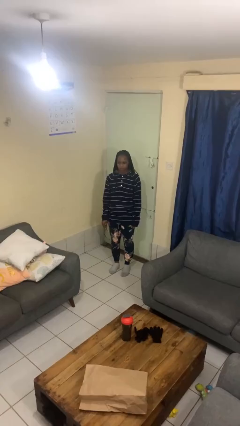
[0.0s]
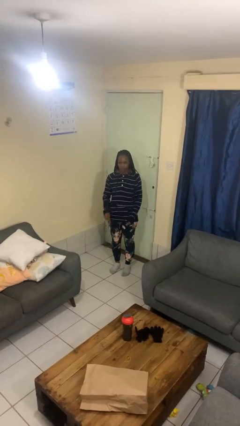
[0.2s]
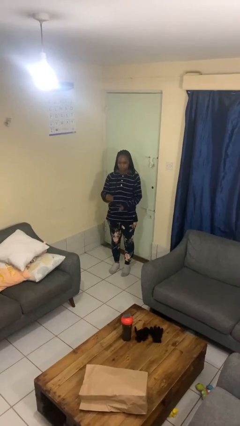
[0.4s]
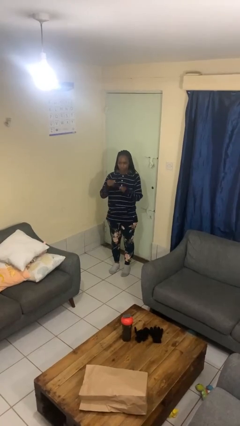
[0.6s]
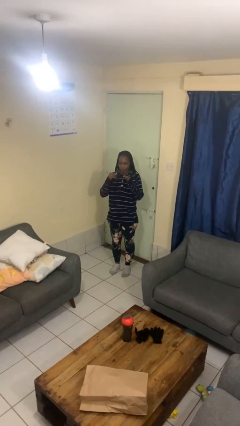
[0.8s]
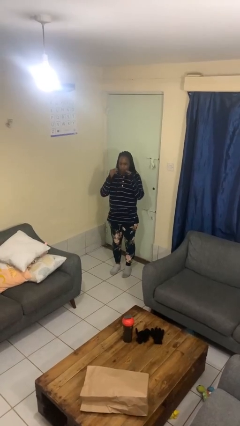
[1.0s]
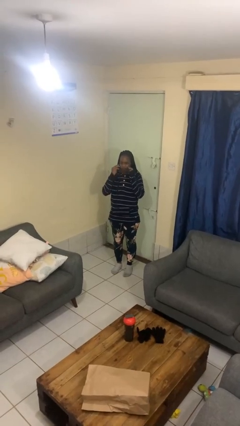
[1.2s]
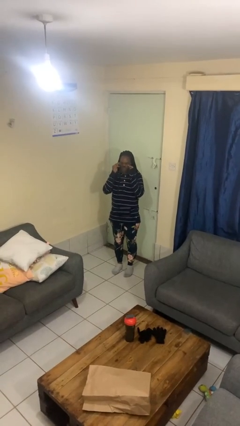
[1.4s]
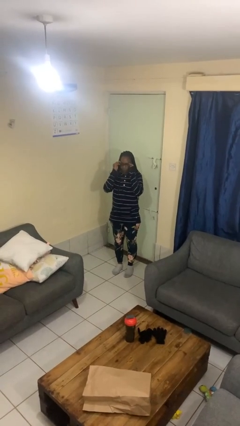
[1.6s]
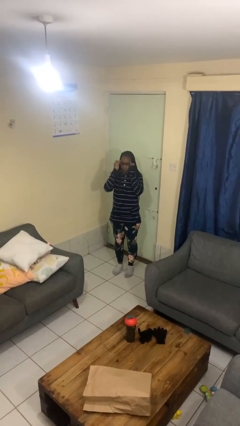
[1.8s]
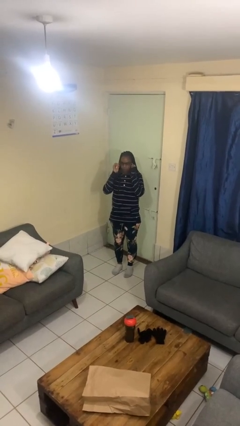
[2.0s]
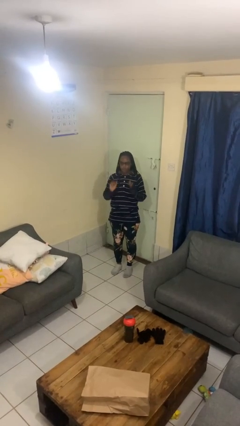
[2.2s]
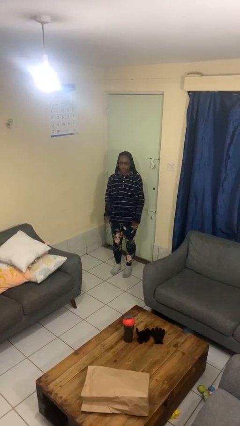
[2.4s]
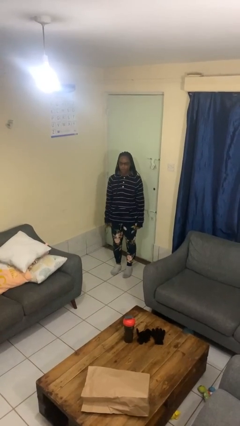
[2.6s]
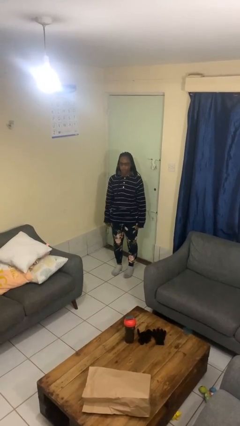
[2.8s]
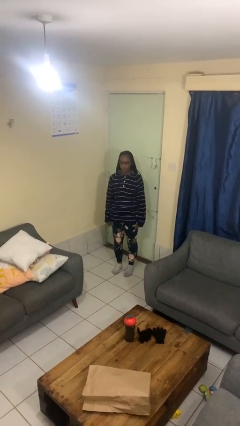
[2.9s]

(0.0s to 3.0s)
person puts on glasses

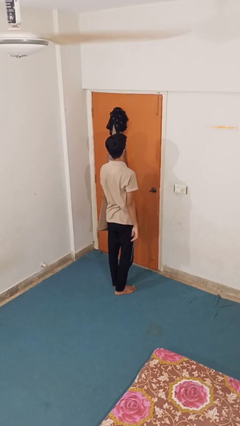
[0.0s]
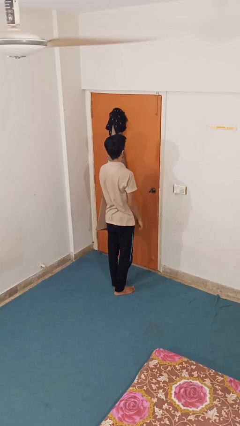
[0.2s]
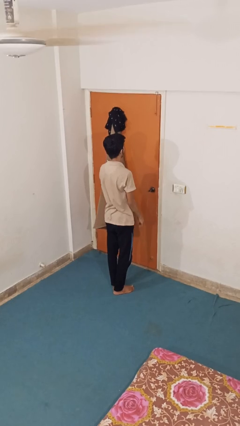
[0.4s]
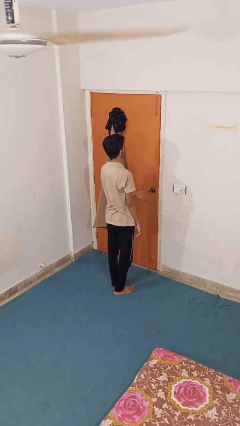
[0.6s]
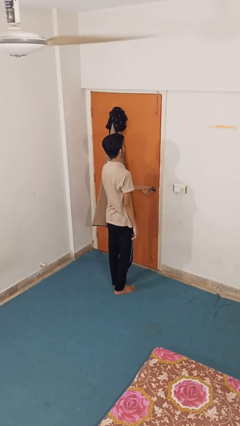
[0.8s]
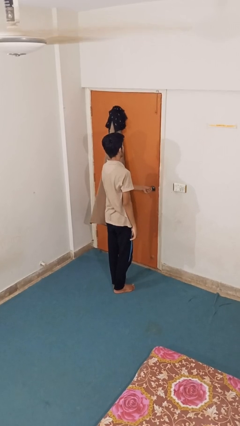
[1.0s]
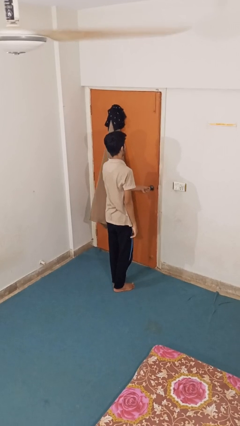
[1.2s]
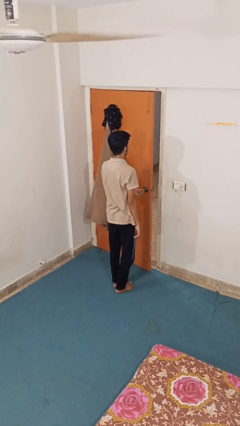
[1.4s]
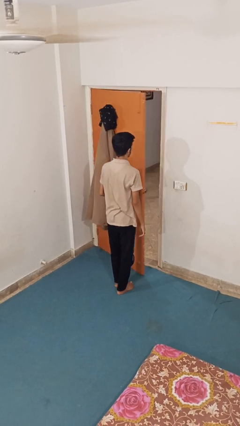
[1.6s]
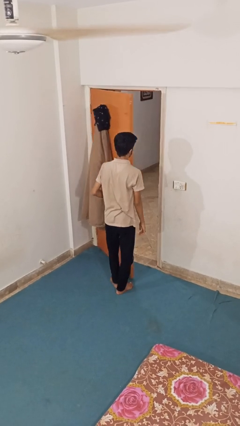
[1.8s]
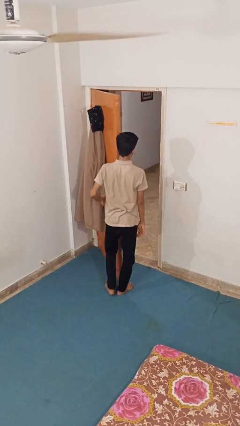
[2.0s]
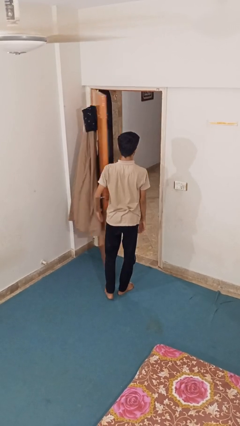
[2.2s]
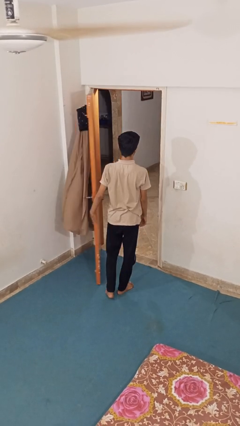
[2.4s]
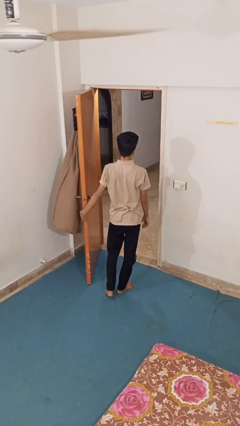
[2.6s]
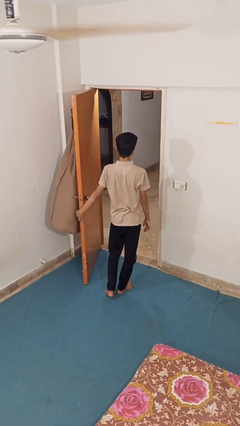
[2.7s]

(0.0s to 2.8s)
person opens facility door

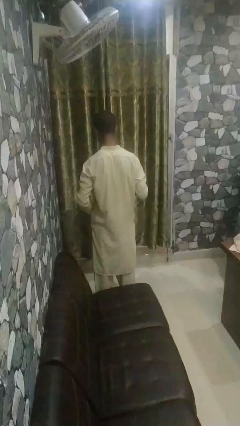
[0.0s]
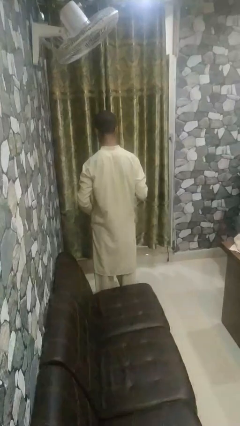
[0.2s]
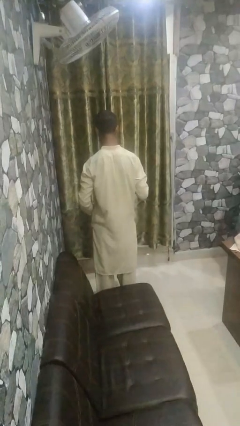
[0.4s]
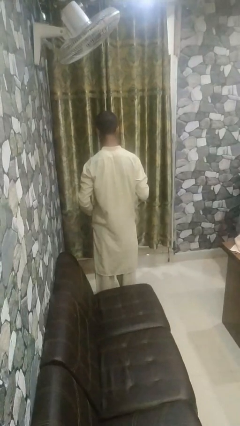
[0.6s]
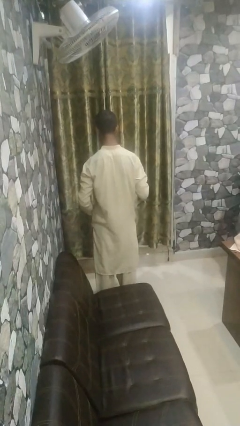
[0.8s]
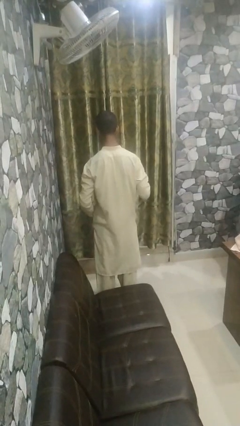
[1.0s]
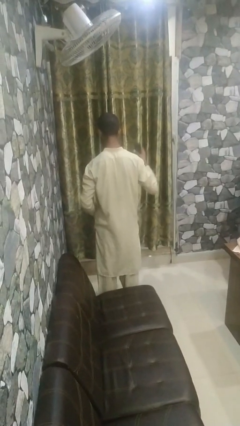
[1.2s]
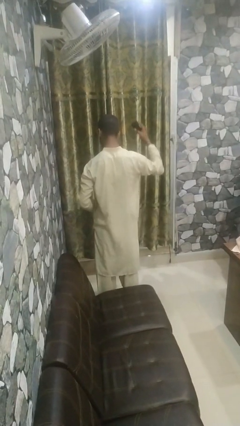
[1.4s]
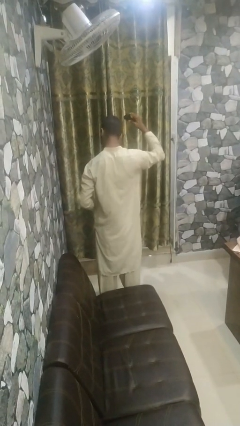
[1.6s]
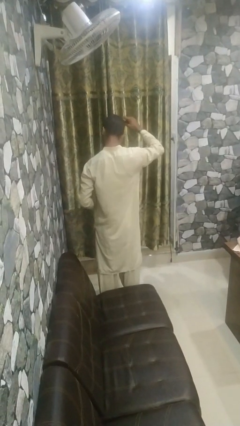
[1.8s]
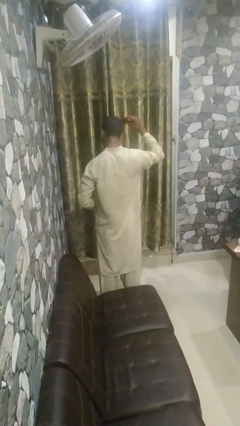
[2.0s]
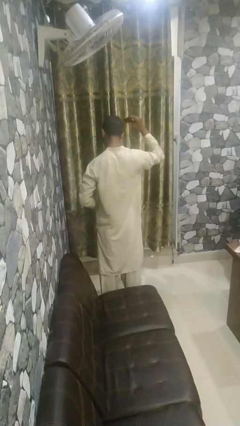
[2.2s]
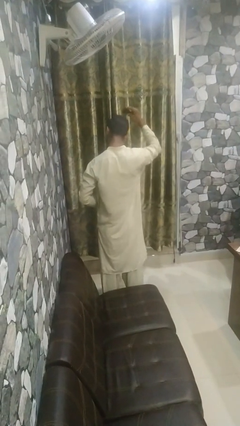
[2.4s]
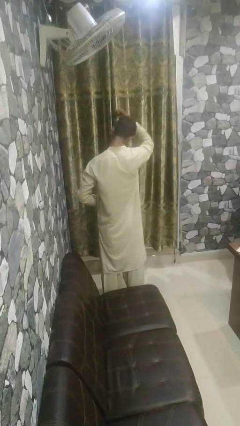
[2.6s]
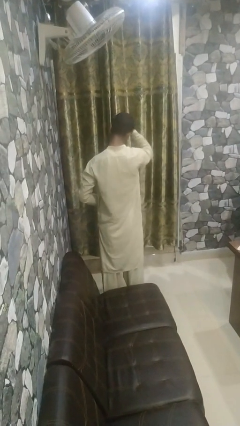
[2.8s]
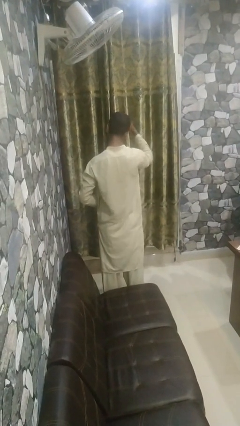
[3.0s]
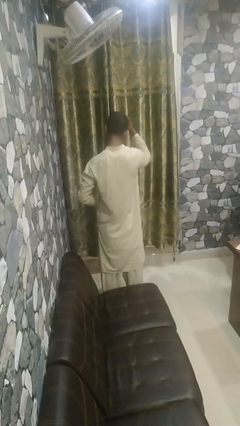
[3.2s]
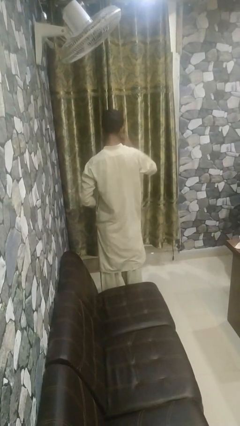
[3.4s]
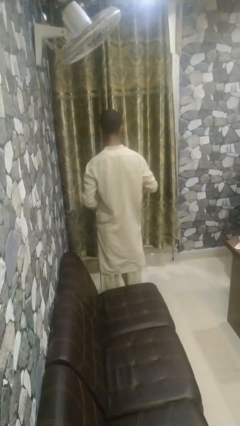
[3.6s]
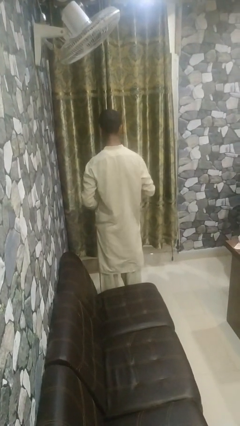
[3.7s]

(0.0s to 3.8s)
person dries hair with hairdryer

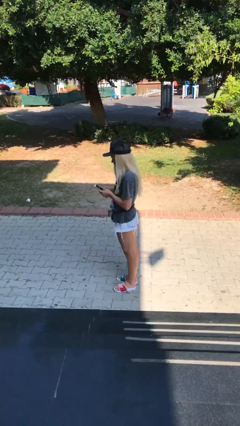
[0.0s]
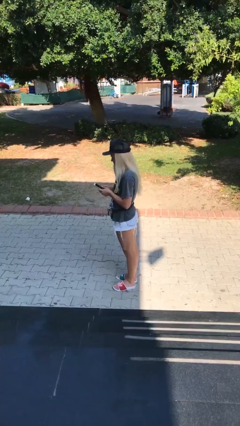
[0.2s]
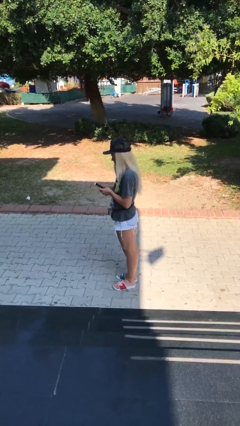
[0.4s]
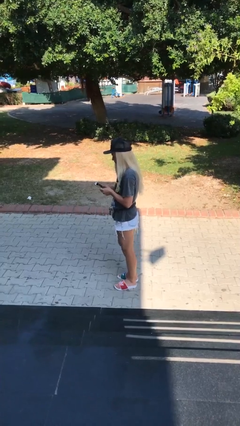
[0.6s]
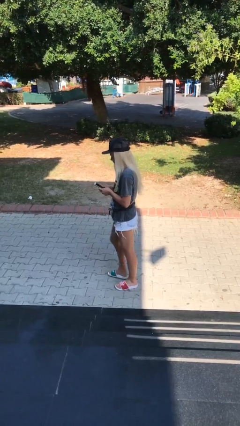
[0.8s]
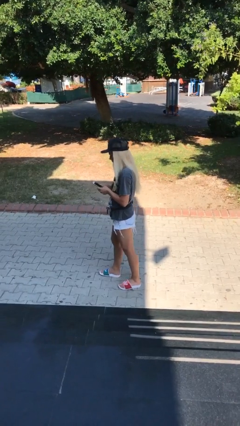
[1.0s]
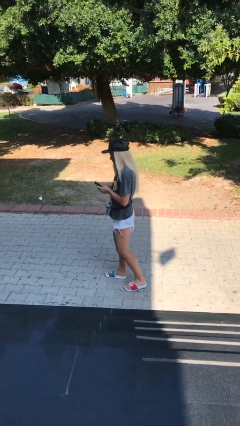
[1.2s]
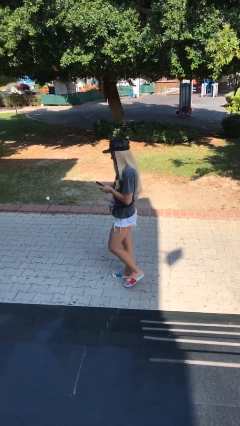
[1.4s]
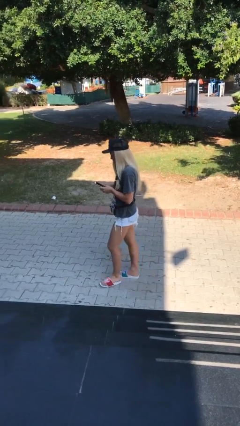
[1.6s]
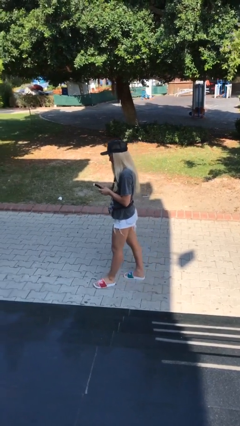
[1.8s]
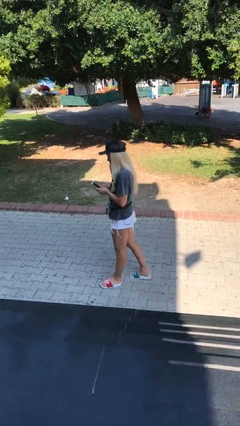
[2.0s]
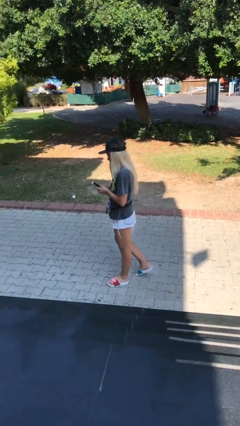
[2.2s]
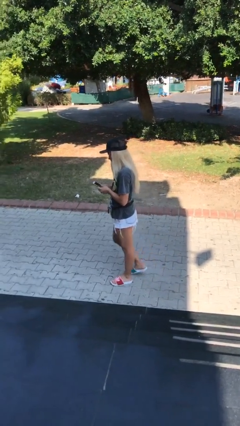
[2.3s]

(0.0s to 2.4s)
person texts on phone

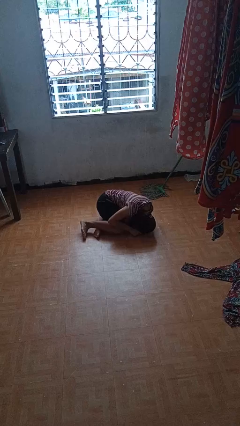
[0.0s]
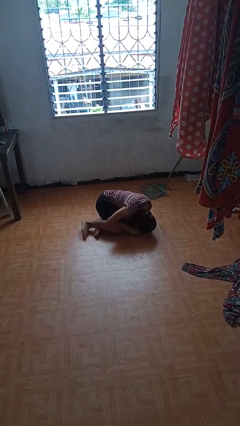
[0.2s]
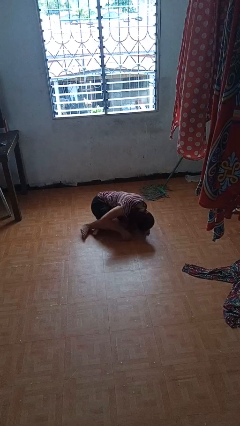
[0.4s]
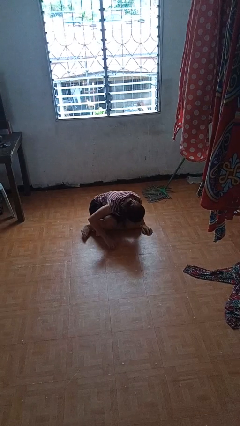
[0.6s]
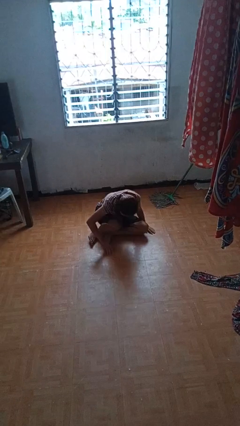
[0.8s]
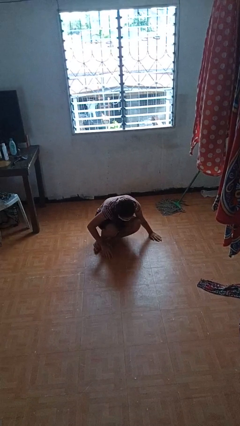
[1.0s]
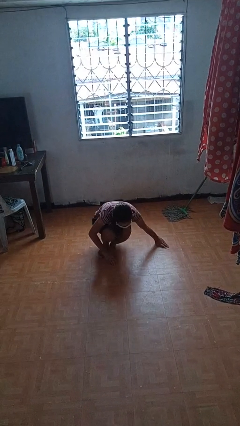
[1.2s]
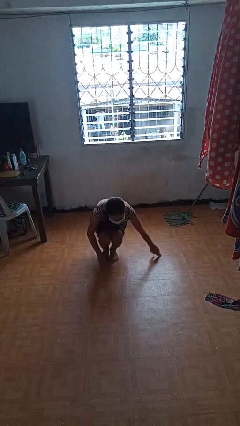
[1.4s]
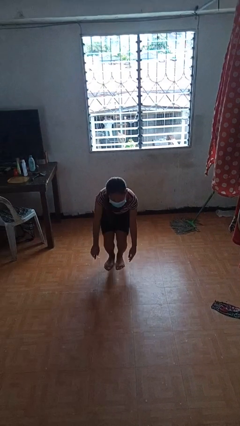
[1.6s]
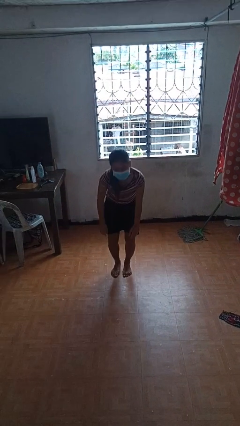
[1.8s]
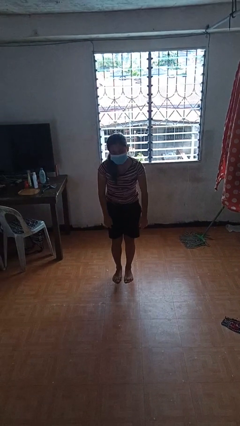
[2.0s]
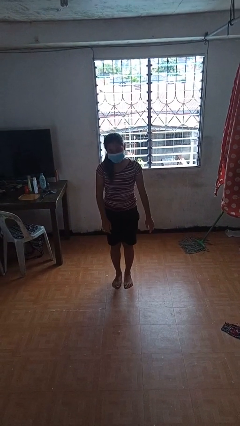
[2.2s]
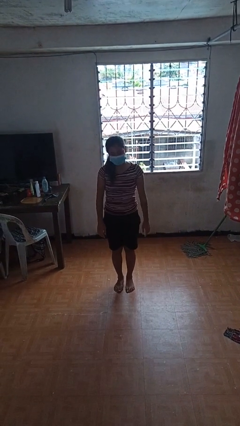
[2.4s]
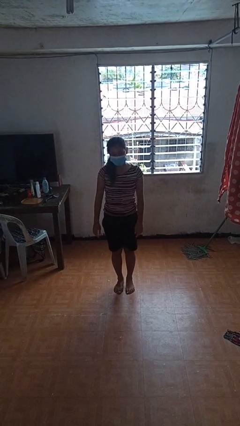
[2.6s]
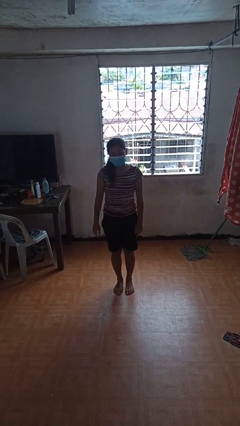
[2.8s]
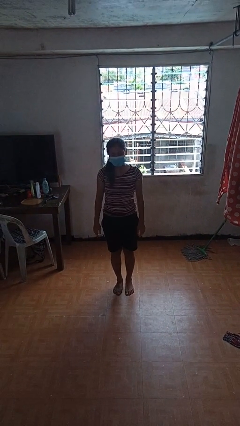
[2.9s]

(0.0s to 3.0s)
person stands up from floor

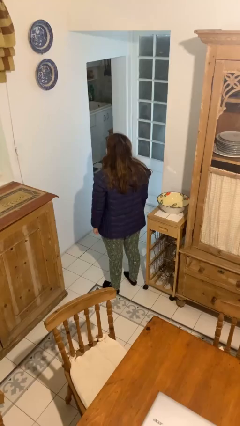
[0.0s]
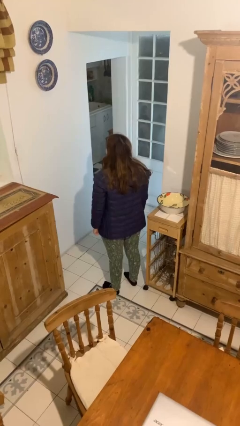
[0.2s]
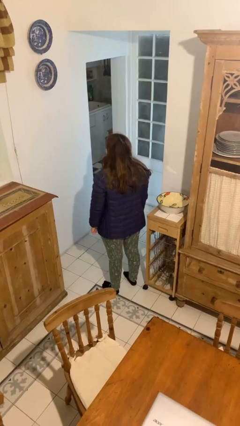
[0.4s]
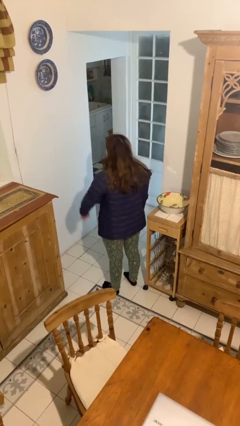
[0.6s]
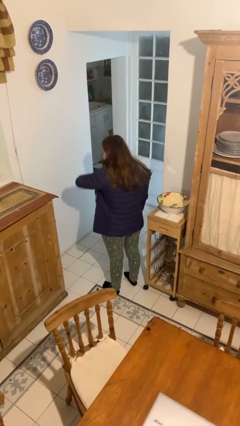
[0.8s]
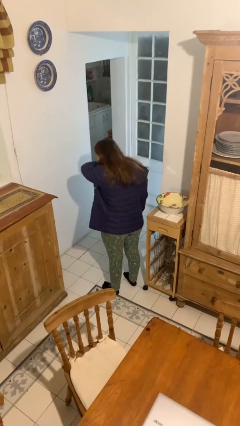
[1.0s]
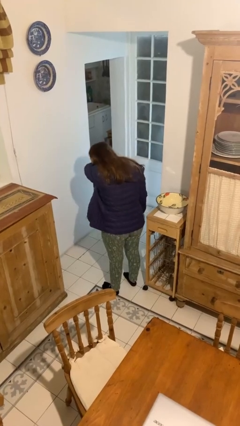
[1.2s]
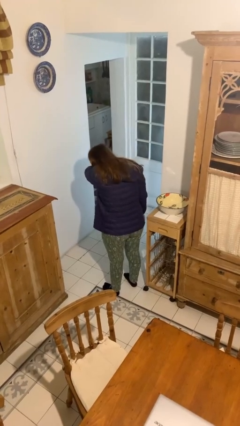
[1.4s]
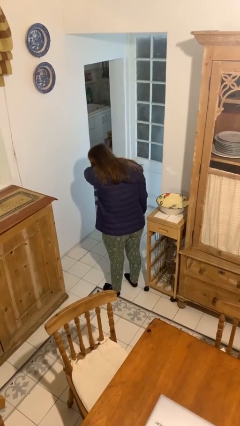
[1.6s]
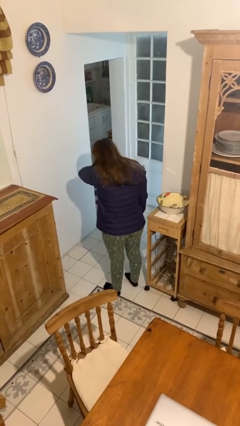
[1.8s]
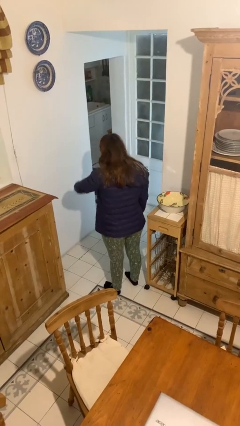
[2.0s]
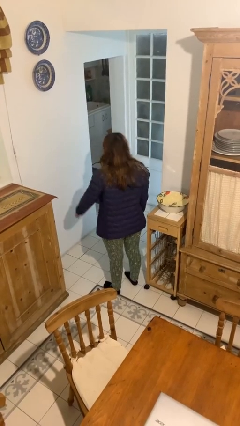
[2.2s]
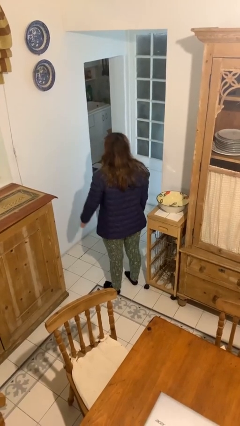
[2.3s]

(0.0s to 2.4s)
person sneezes into arm

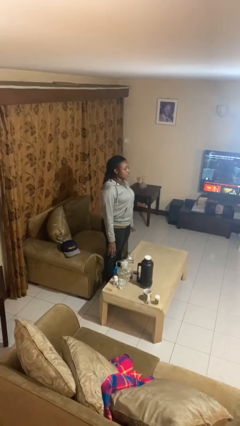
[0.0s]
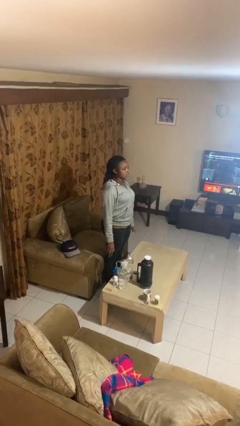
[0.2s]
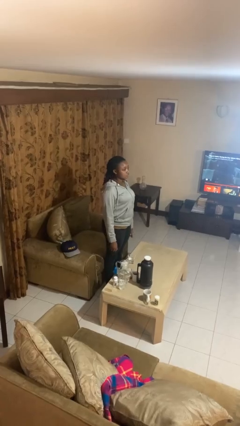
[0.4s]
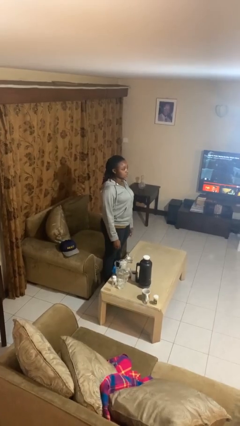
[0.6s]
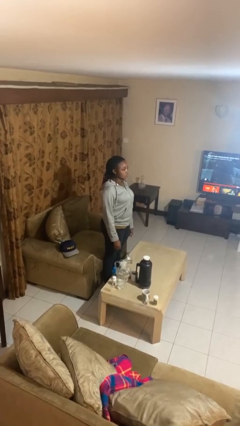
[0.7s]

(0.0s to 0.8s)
person licks fingers
